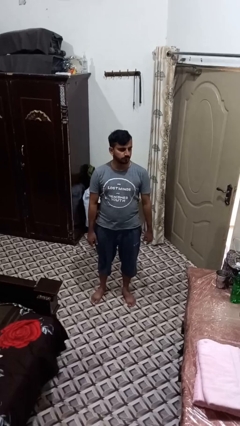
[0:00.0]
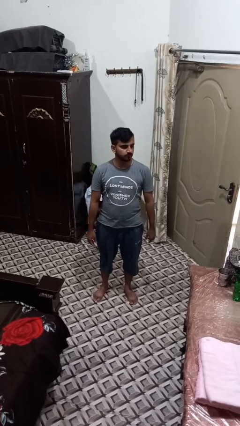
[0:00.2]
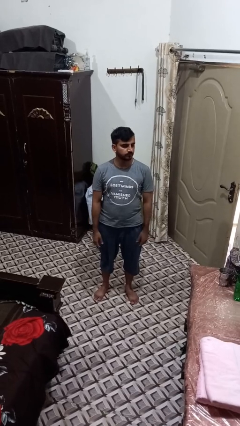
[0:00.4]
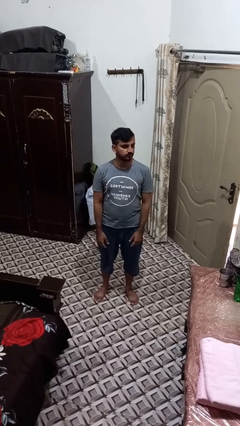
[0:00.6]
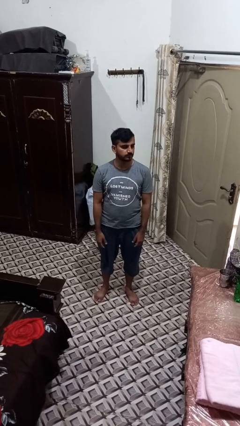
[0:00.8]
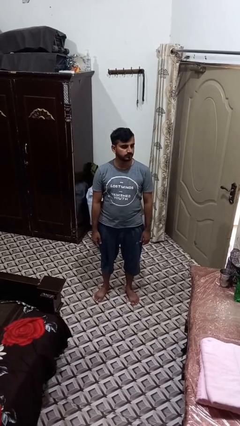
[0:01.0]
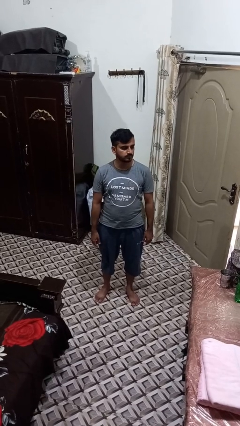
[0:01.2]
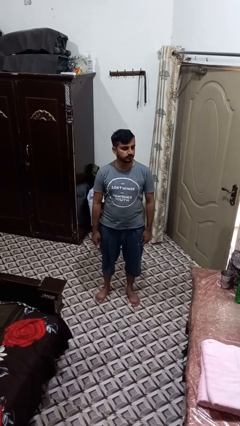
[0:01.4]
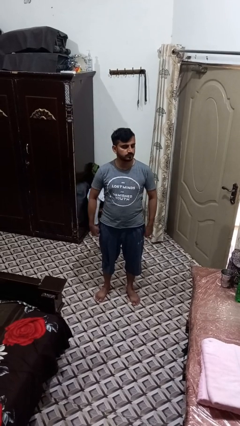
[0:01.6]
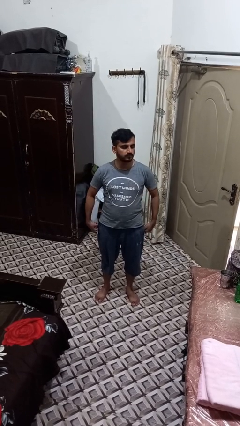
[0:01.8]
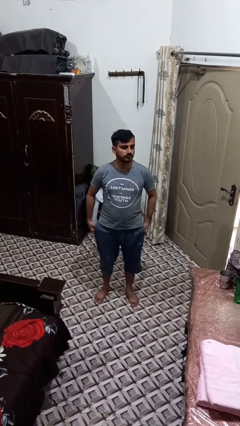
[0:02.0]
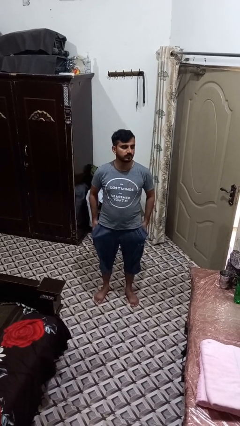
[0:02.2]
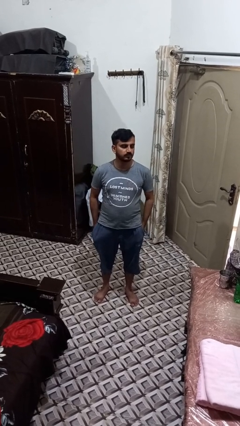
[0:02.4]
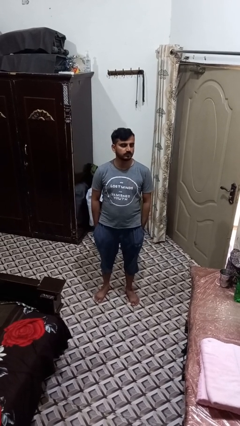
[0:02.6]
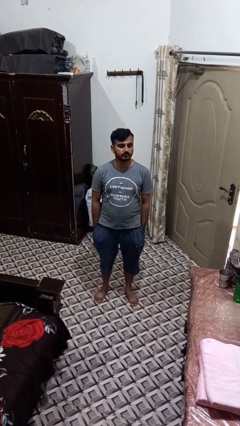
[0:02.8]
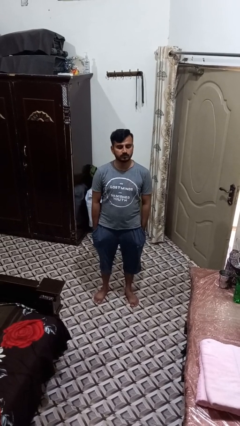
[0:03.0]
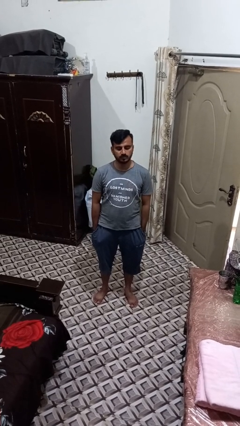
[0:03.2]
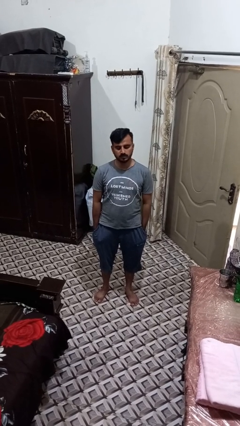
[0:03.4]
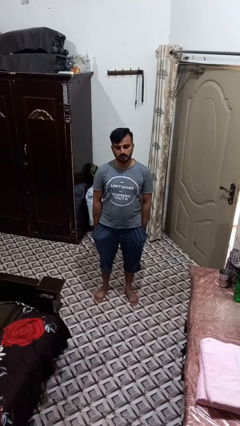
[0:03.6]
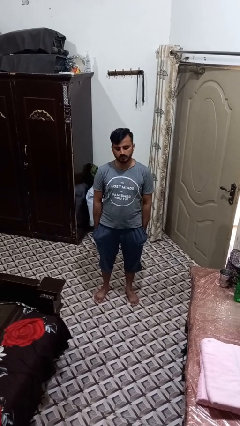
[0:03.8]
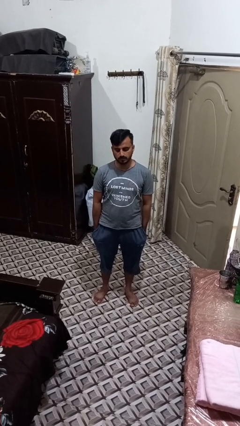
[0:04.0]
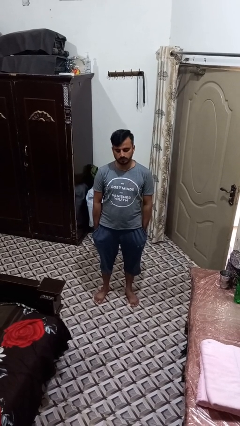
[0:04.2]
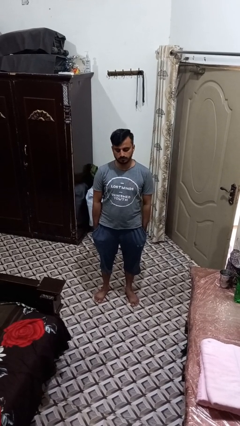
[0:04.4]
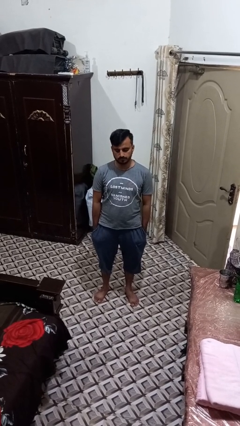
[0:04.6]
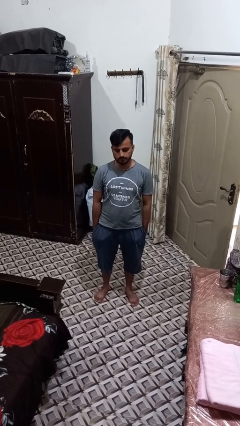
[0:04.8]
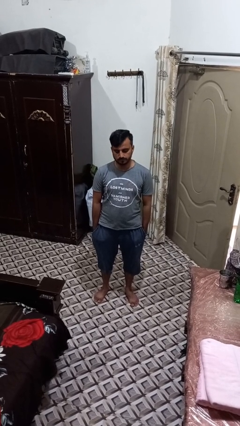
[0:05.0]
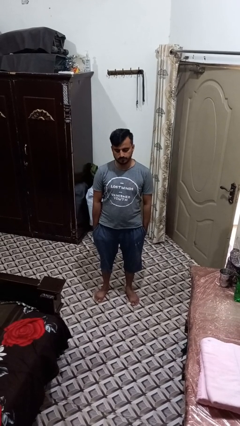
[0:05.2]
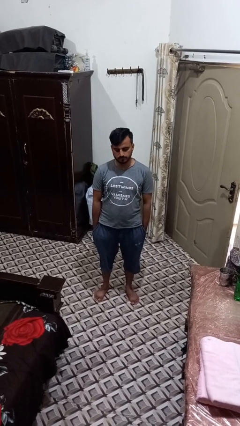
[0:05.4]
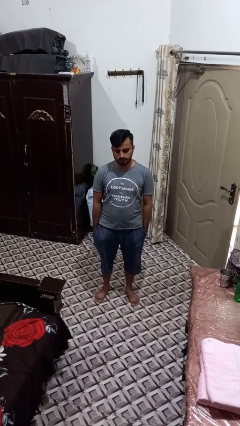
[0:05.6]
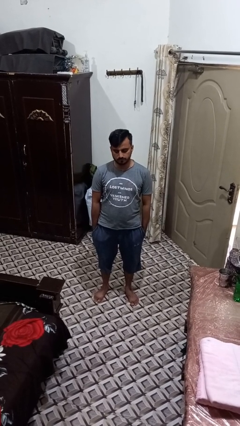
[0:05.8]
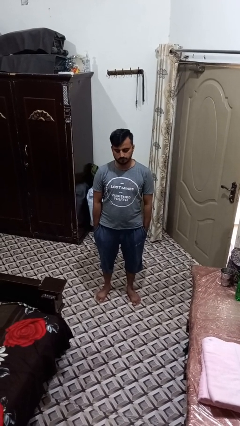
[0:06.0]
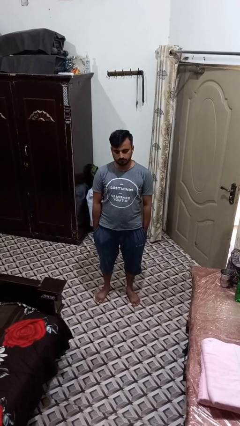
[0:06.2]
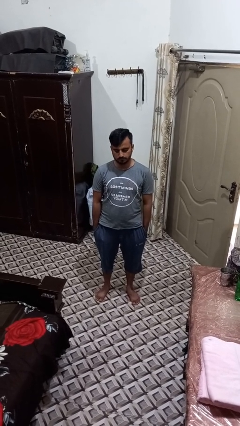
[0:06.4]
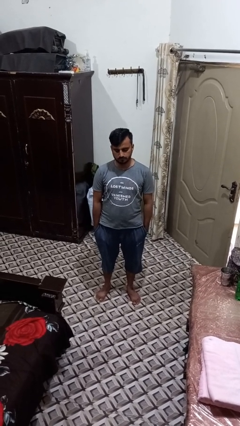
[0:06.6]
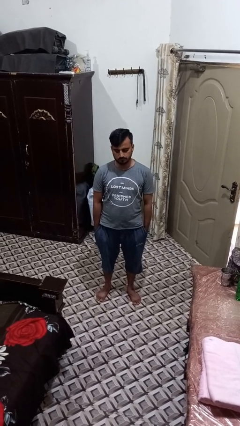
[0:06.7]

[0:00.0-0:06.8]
person puts hands in back pockets

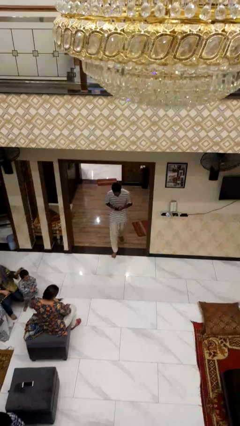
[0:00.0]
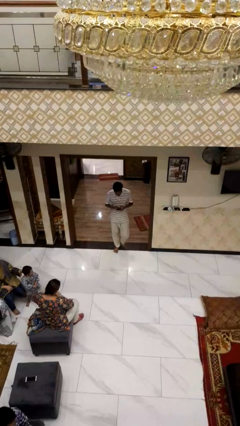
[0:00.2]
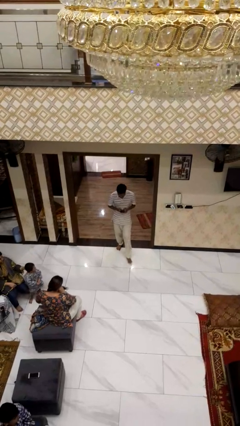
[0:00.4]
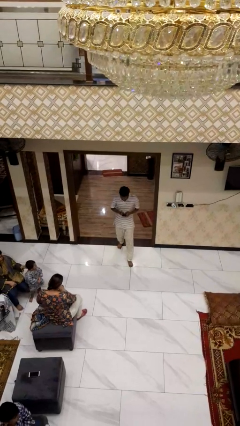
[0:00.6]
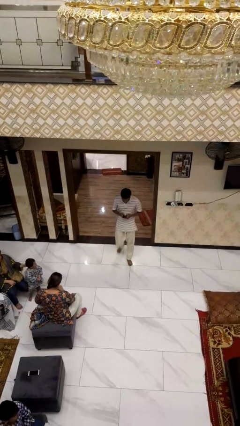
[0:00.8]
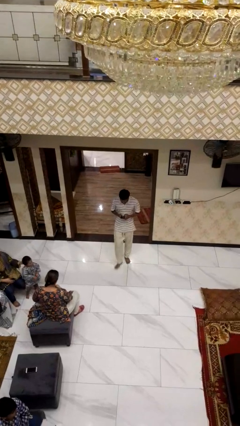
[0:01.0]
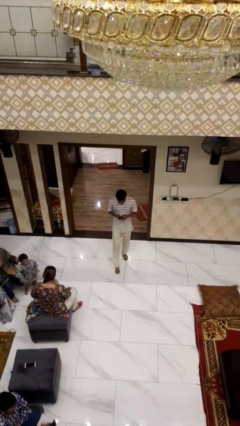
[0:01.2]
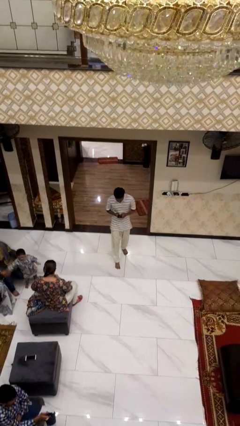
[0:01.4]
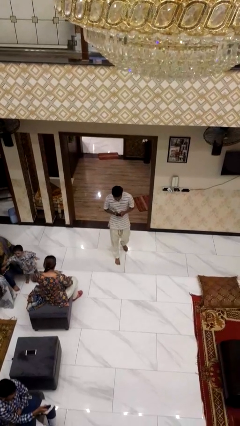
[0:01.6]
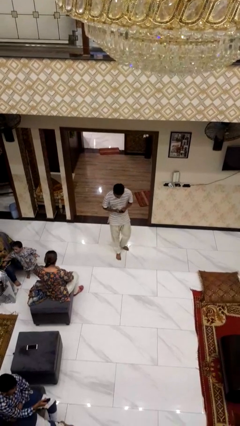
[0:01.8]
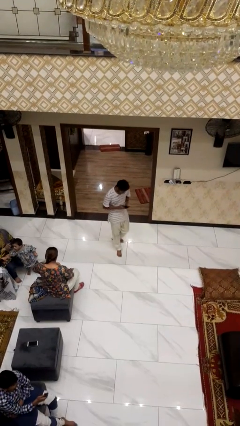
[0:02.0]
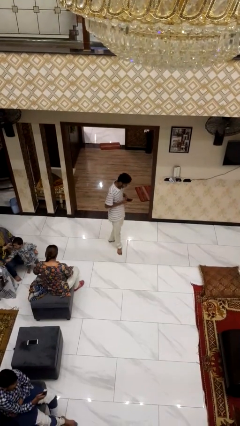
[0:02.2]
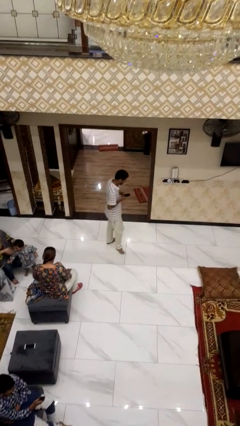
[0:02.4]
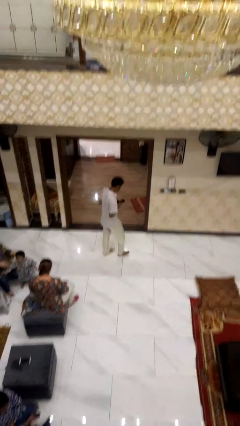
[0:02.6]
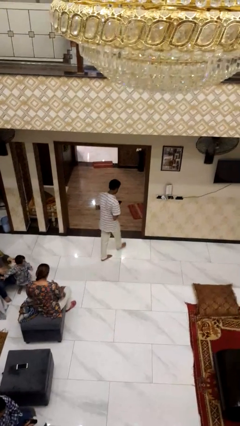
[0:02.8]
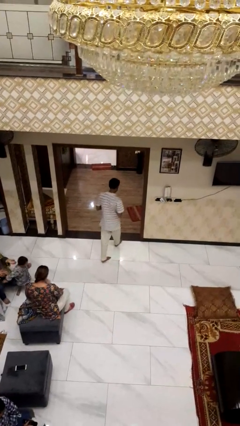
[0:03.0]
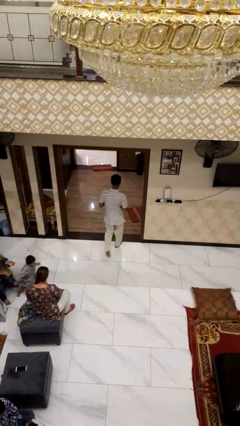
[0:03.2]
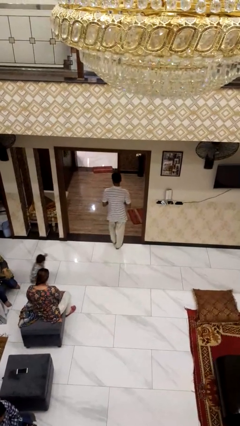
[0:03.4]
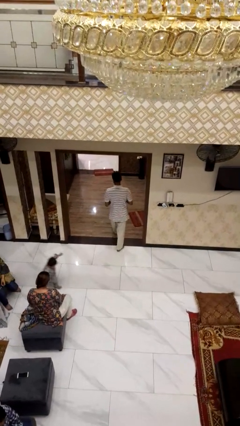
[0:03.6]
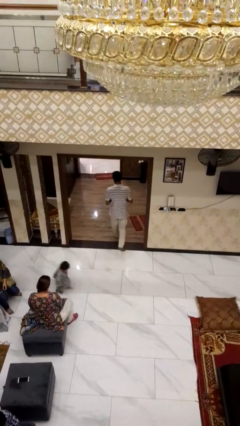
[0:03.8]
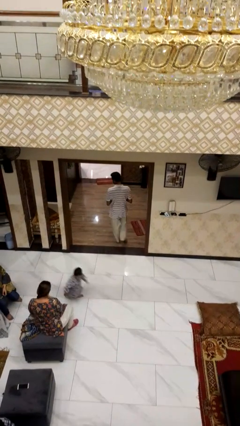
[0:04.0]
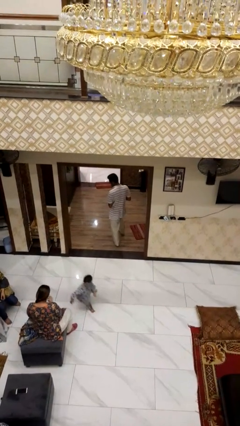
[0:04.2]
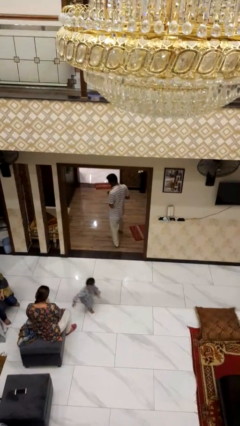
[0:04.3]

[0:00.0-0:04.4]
person enters scene through structure

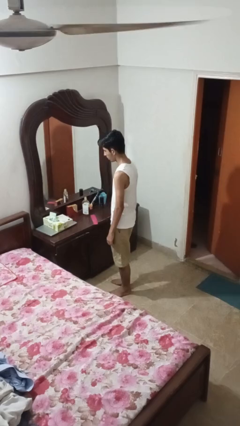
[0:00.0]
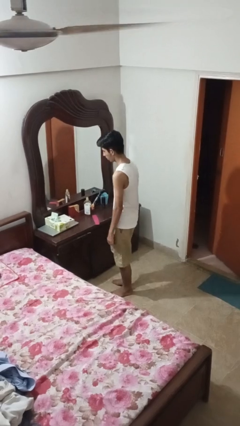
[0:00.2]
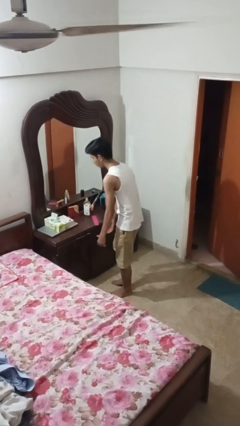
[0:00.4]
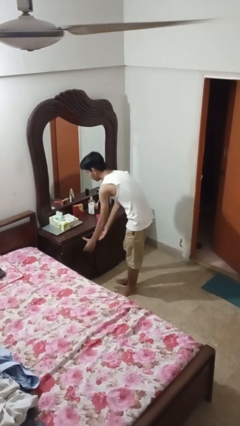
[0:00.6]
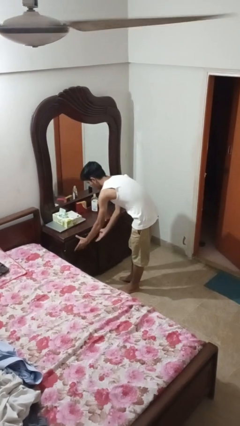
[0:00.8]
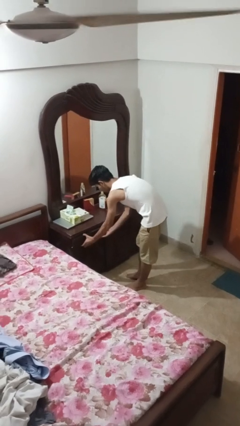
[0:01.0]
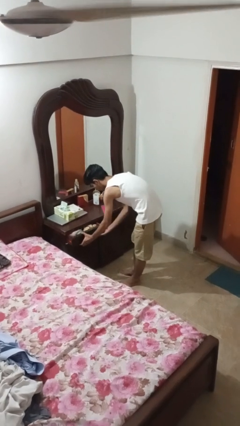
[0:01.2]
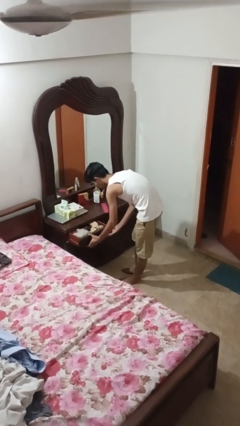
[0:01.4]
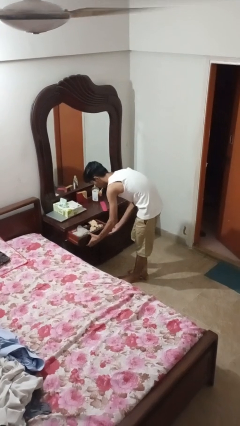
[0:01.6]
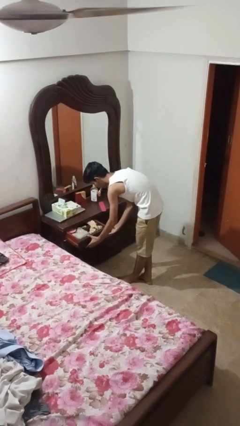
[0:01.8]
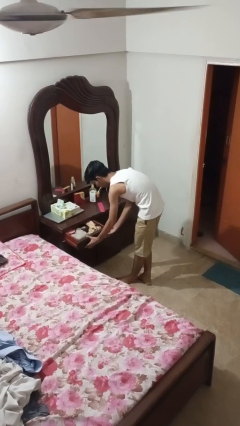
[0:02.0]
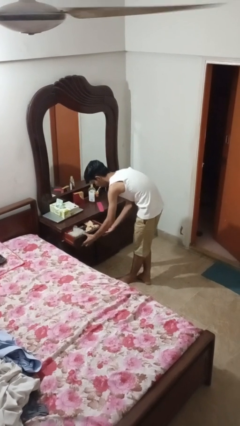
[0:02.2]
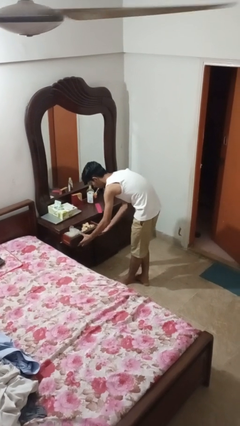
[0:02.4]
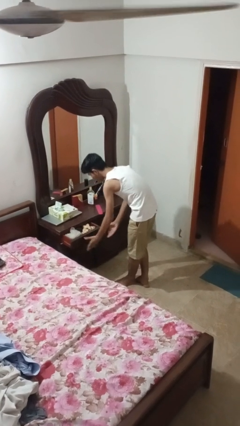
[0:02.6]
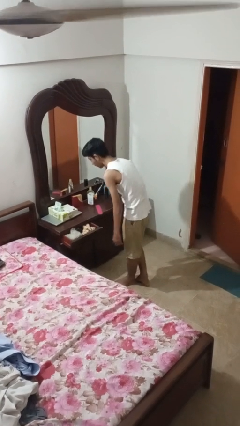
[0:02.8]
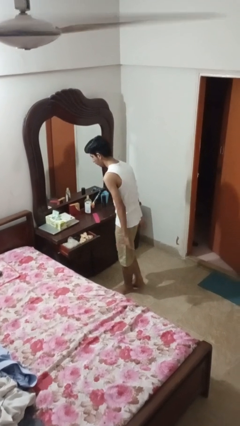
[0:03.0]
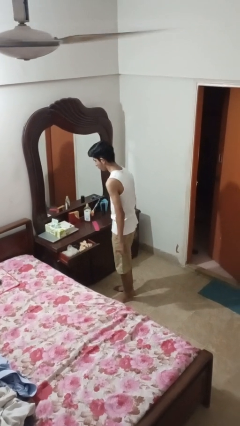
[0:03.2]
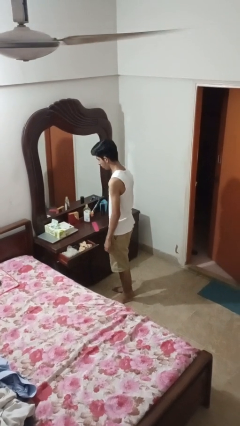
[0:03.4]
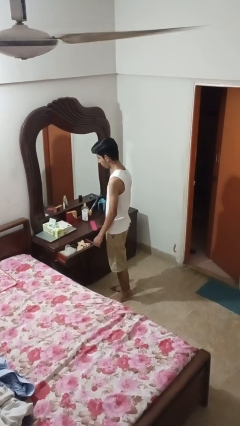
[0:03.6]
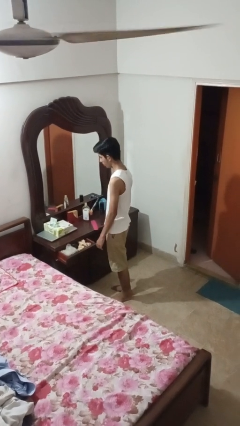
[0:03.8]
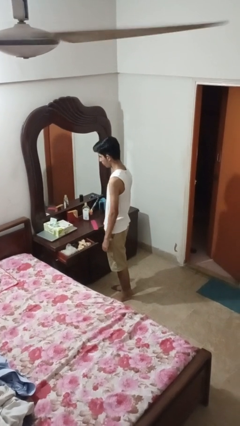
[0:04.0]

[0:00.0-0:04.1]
person opens dresser drawer

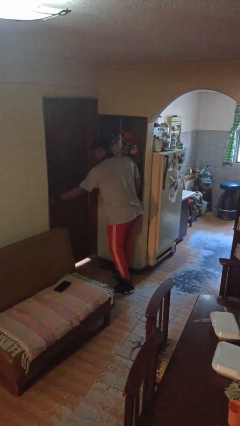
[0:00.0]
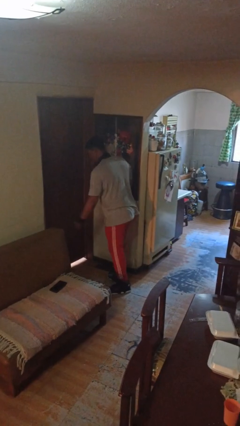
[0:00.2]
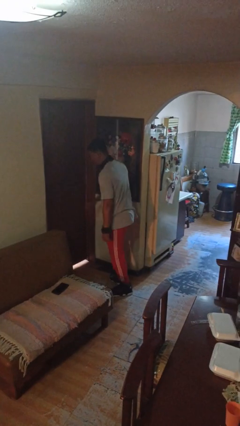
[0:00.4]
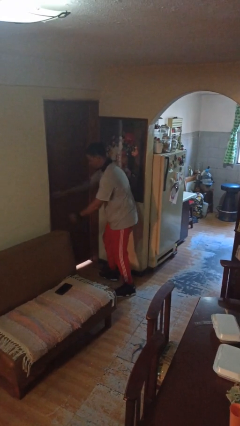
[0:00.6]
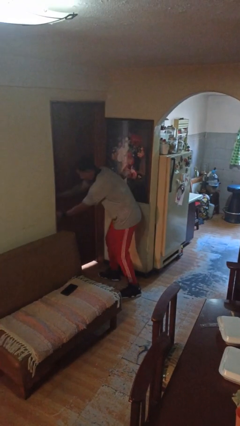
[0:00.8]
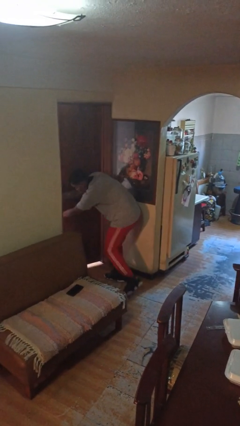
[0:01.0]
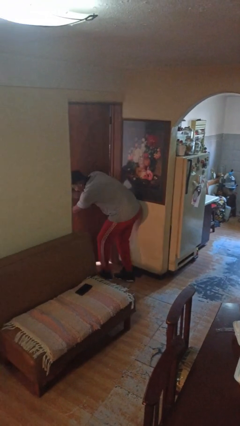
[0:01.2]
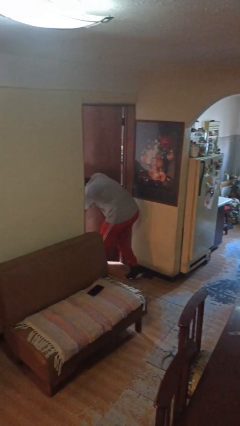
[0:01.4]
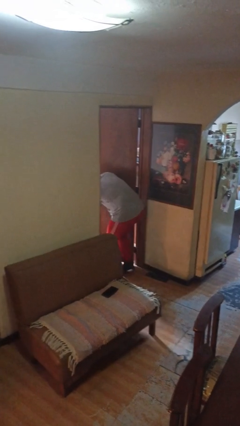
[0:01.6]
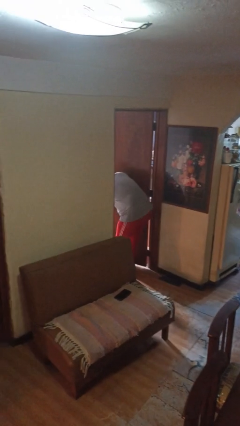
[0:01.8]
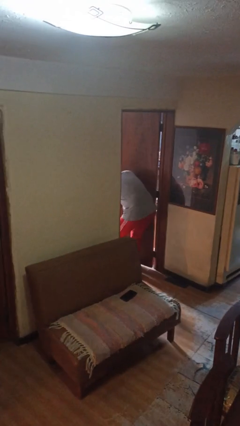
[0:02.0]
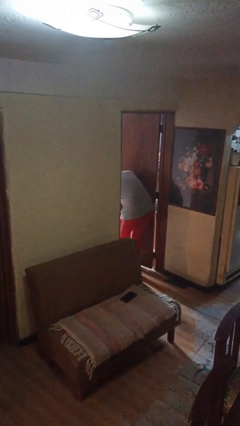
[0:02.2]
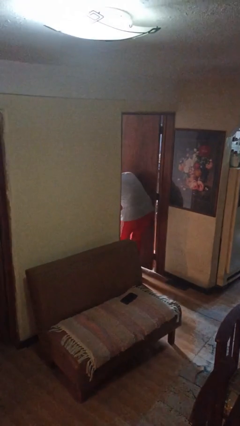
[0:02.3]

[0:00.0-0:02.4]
person opens facility door
